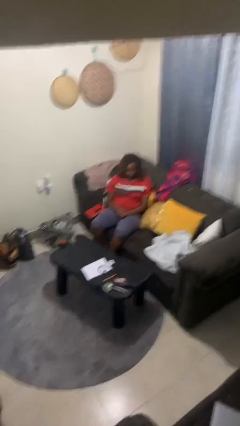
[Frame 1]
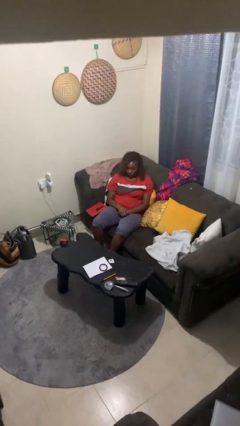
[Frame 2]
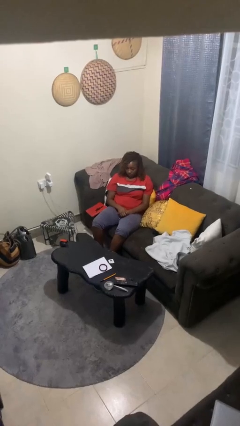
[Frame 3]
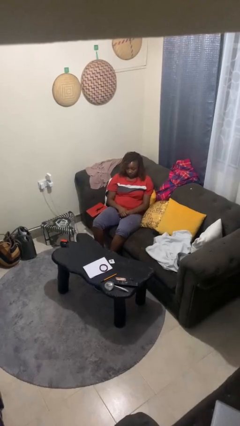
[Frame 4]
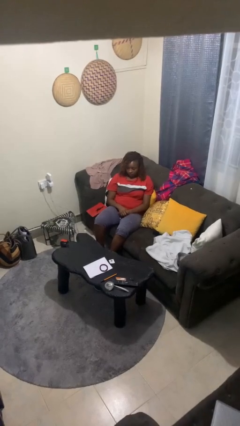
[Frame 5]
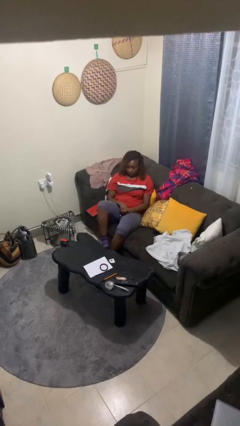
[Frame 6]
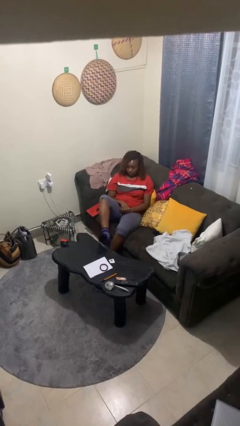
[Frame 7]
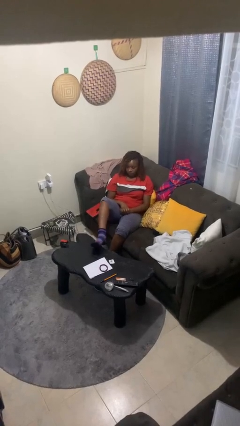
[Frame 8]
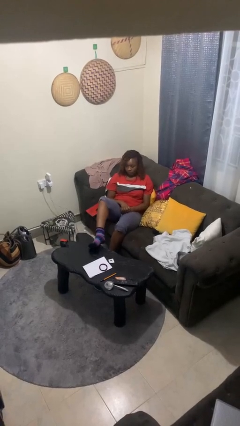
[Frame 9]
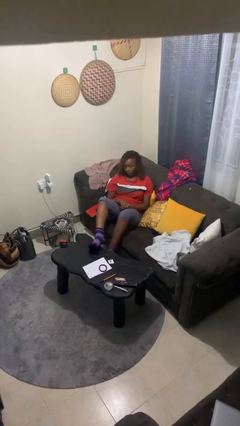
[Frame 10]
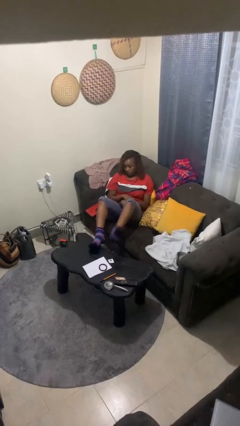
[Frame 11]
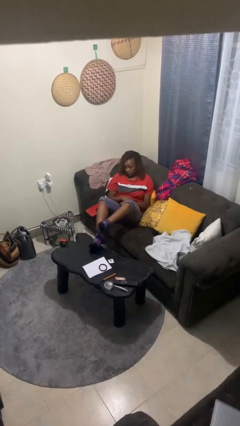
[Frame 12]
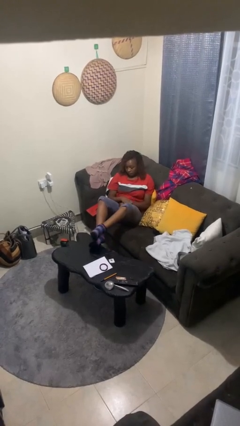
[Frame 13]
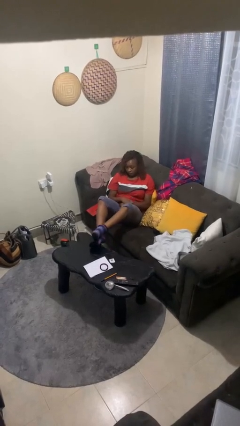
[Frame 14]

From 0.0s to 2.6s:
person puts feet up

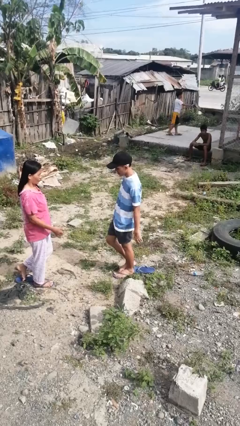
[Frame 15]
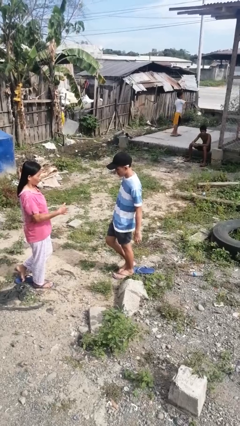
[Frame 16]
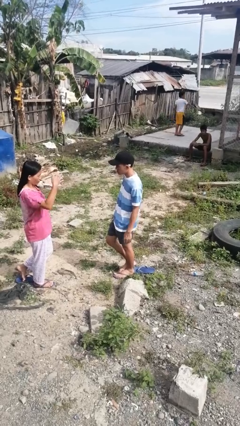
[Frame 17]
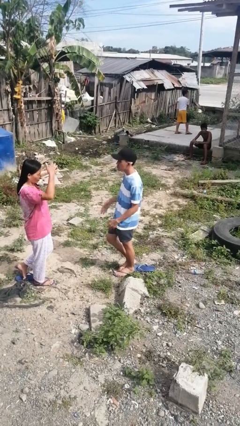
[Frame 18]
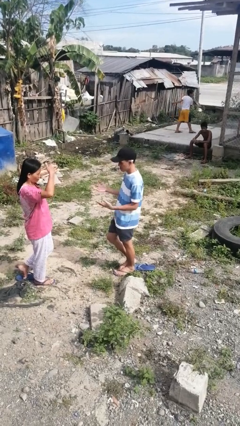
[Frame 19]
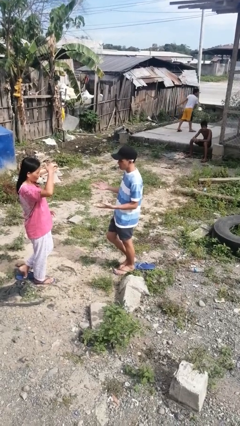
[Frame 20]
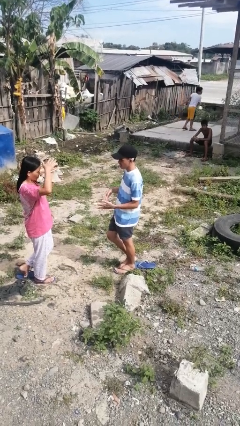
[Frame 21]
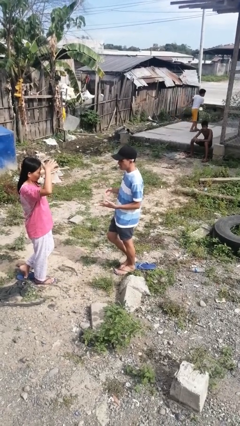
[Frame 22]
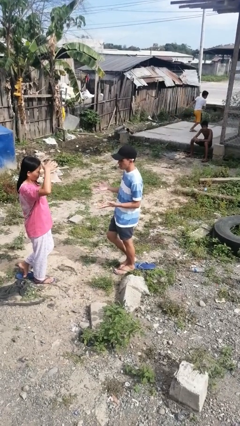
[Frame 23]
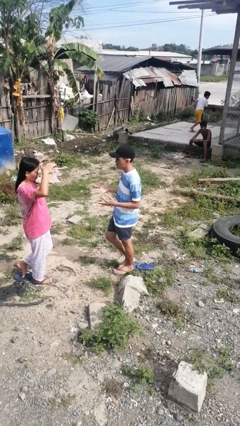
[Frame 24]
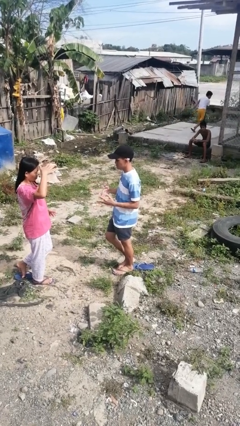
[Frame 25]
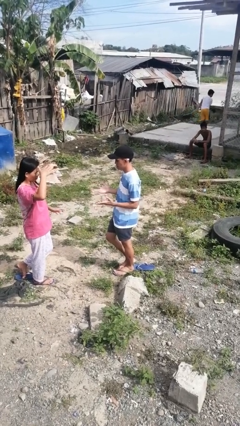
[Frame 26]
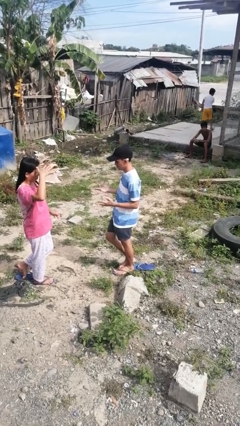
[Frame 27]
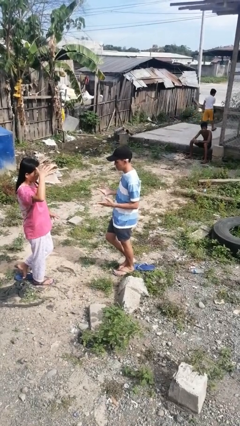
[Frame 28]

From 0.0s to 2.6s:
person talks to person

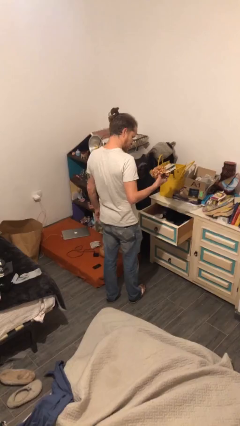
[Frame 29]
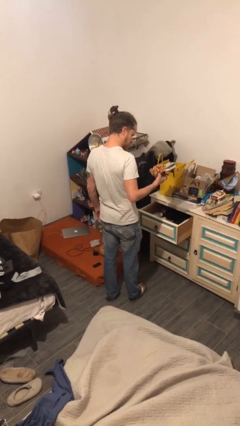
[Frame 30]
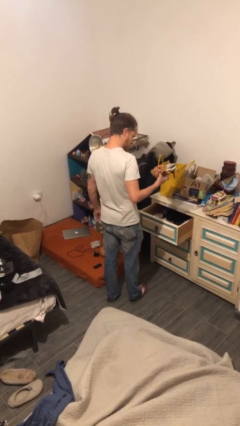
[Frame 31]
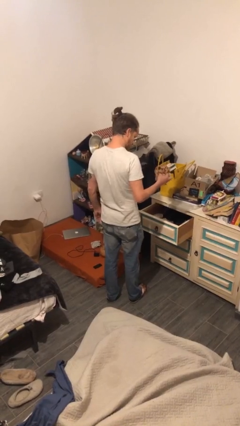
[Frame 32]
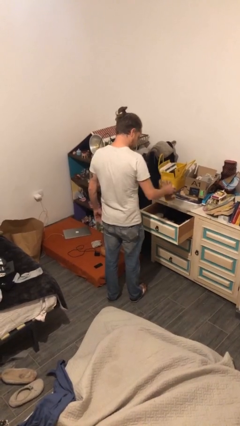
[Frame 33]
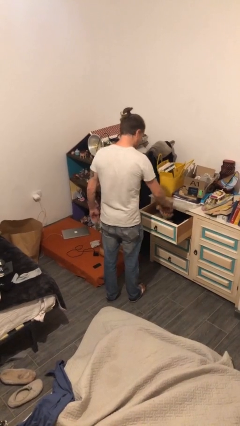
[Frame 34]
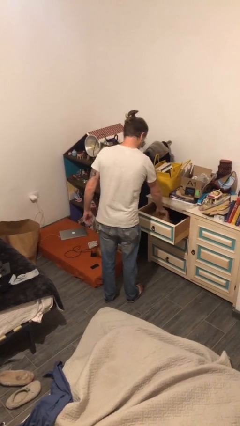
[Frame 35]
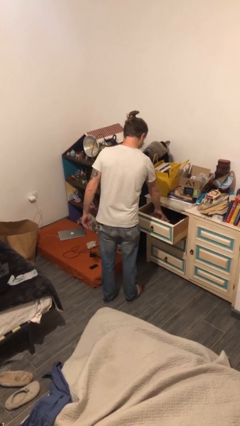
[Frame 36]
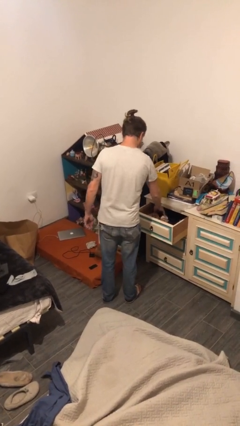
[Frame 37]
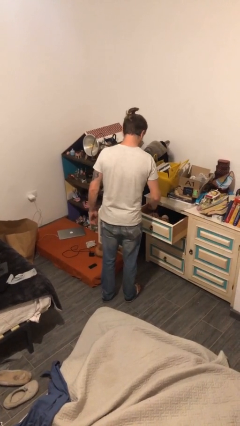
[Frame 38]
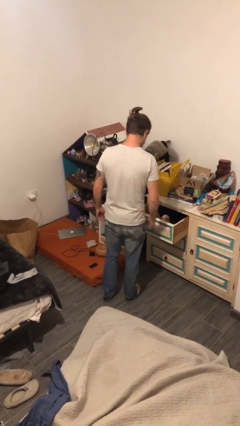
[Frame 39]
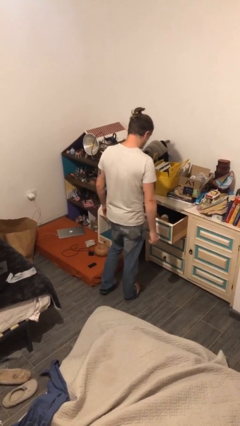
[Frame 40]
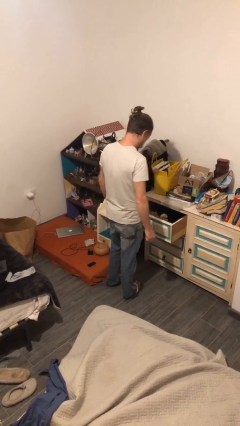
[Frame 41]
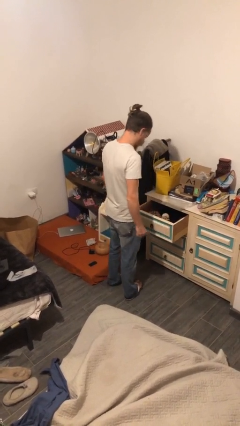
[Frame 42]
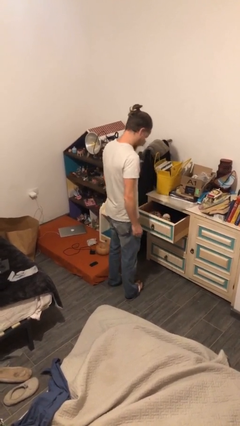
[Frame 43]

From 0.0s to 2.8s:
person puts down object into cabinet

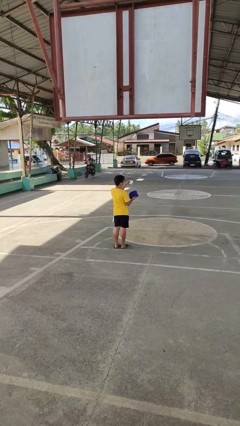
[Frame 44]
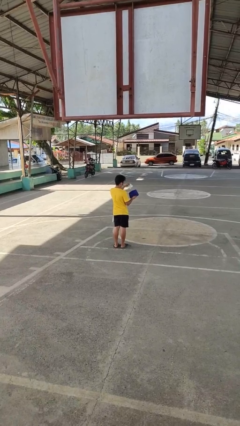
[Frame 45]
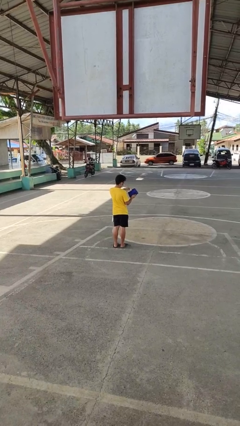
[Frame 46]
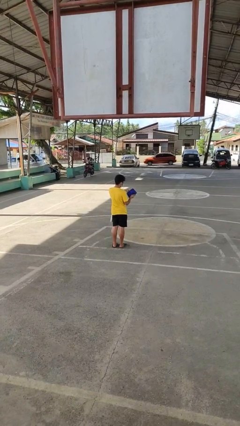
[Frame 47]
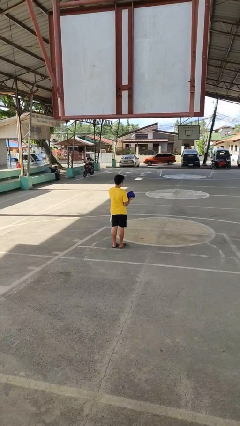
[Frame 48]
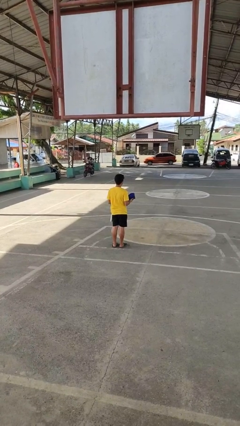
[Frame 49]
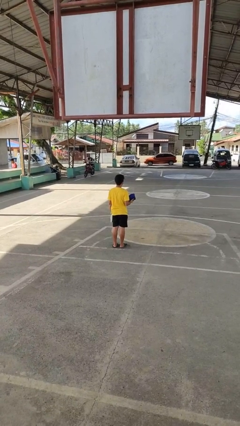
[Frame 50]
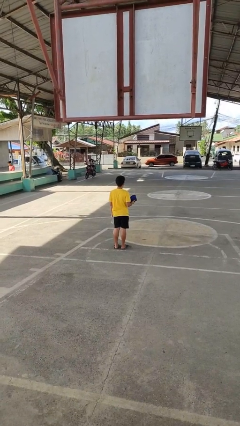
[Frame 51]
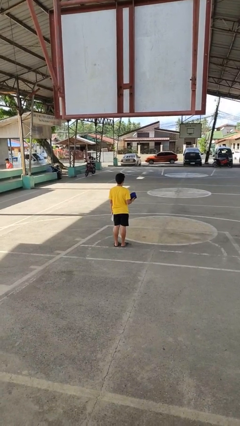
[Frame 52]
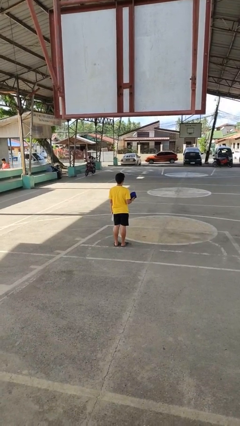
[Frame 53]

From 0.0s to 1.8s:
person puts object into purse

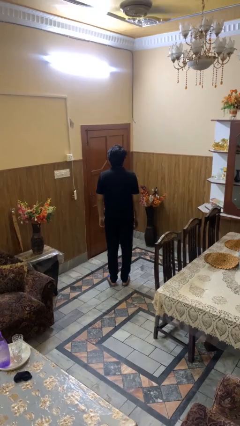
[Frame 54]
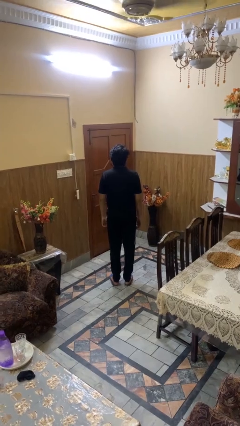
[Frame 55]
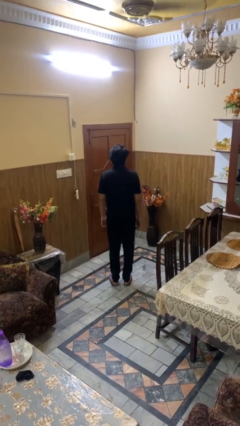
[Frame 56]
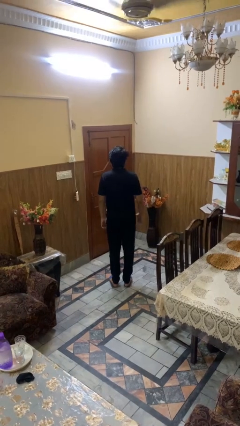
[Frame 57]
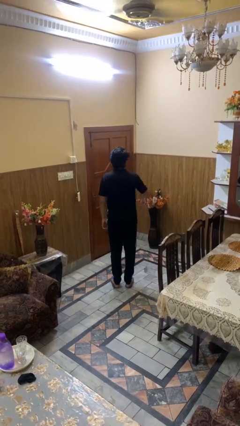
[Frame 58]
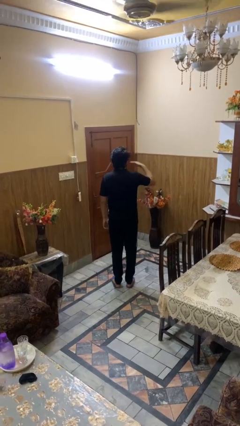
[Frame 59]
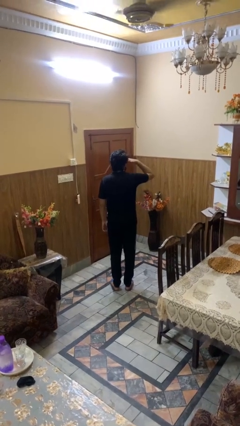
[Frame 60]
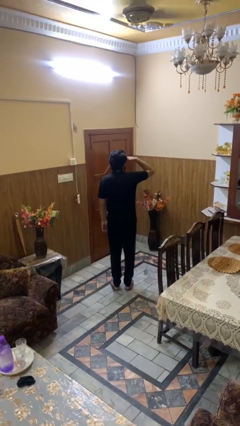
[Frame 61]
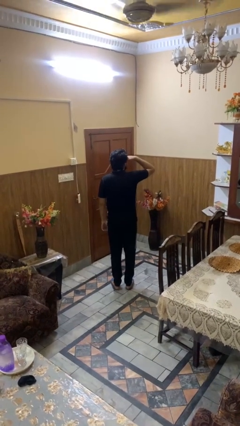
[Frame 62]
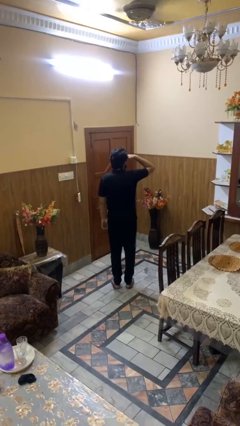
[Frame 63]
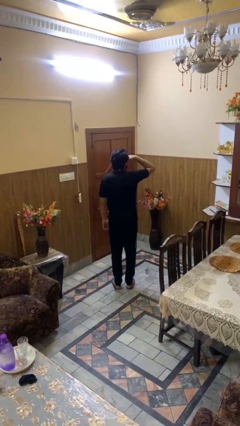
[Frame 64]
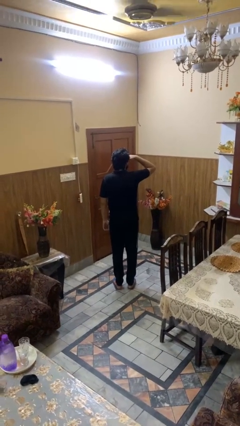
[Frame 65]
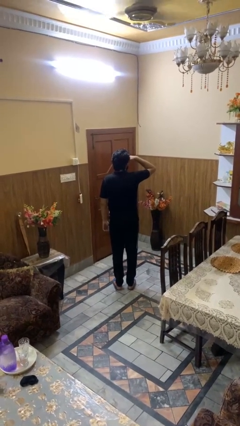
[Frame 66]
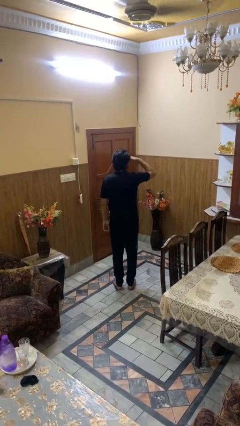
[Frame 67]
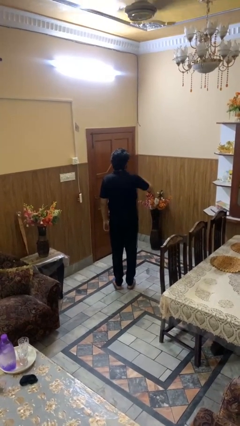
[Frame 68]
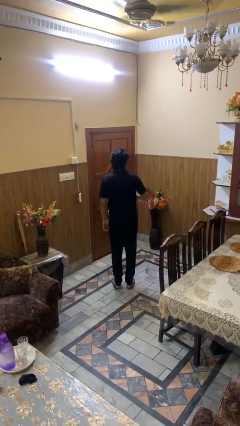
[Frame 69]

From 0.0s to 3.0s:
person shades eyes

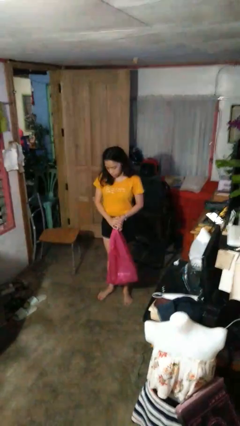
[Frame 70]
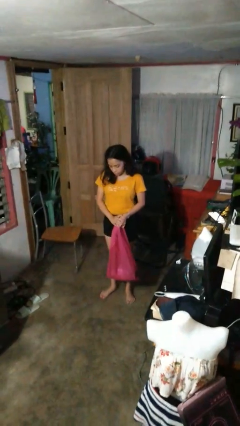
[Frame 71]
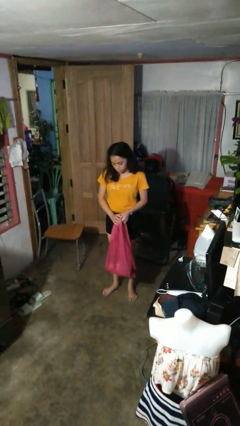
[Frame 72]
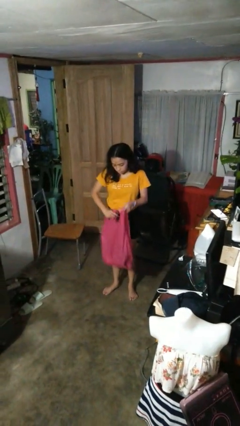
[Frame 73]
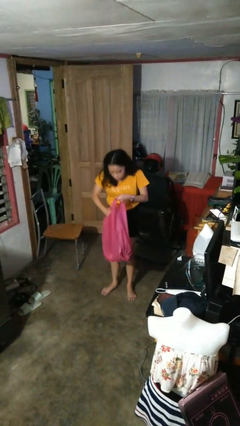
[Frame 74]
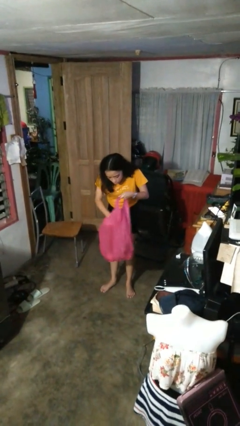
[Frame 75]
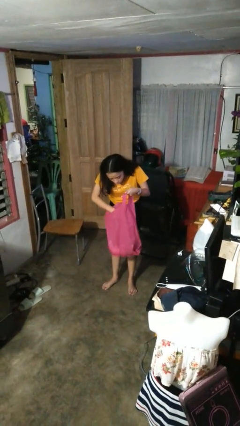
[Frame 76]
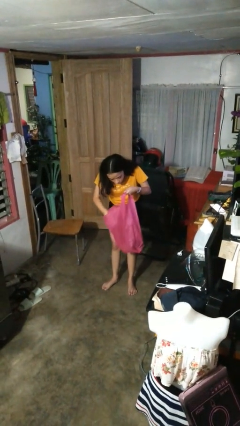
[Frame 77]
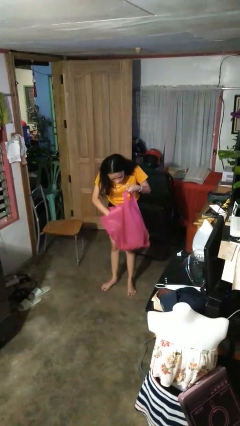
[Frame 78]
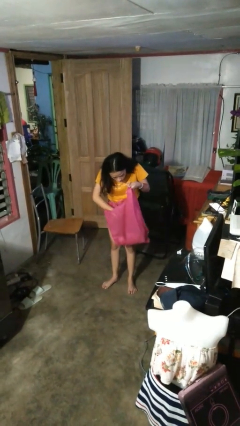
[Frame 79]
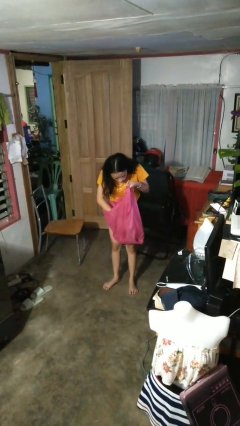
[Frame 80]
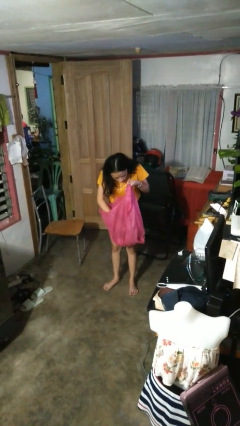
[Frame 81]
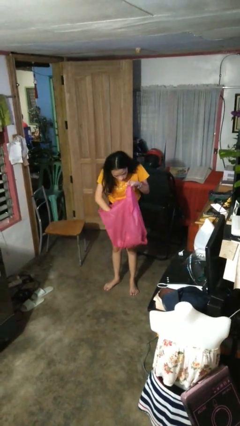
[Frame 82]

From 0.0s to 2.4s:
person searches in bag

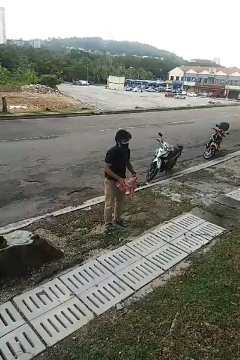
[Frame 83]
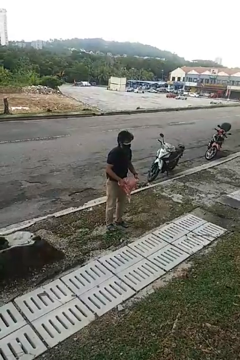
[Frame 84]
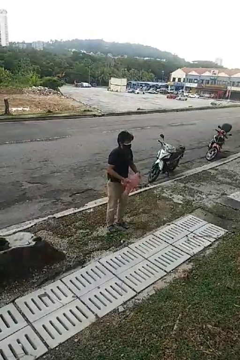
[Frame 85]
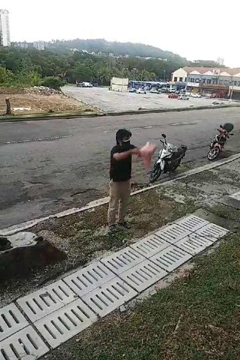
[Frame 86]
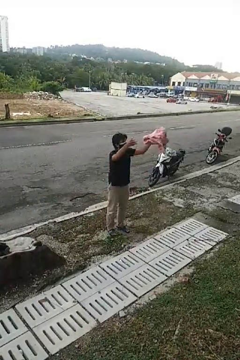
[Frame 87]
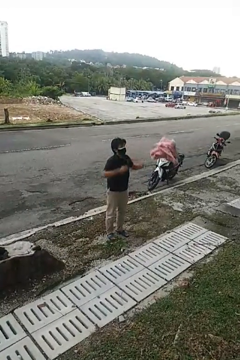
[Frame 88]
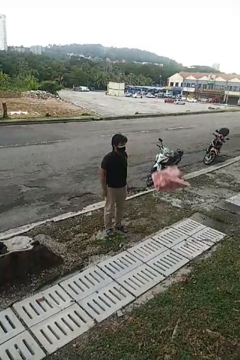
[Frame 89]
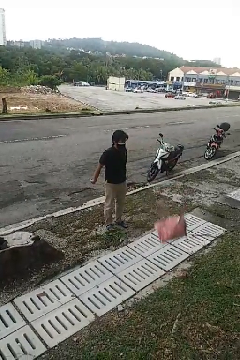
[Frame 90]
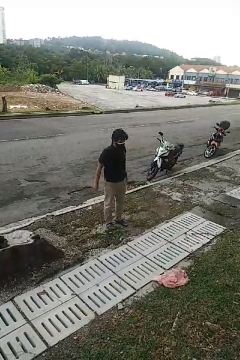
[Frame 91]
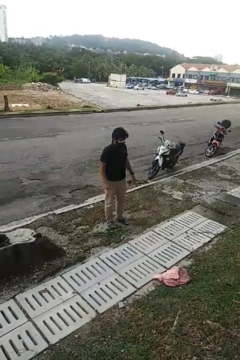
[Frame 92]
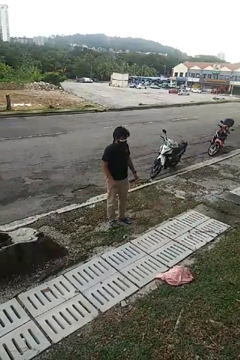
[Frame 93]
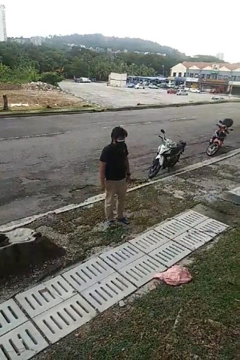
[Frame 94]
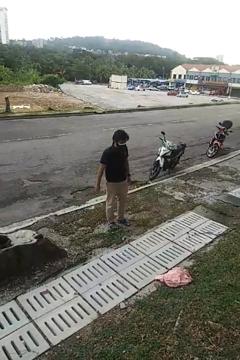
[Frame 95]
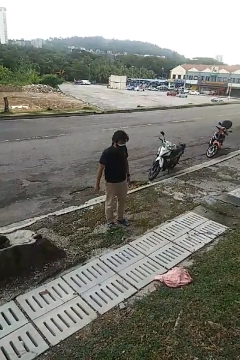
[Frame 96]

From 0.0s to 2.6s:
person throws object into air
